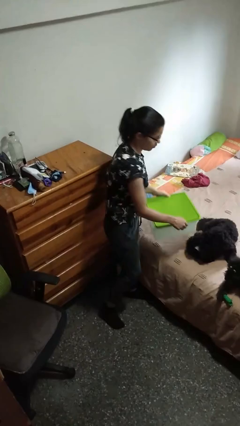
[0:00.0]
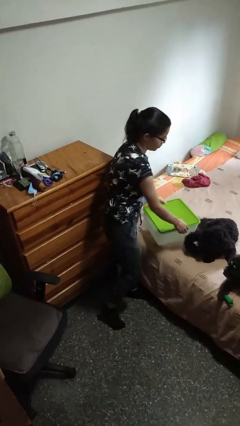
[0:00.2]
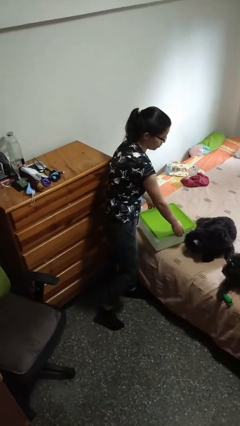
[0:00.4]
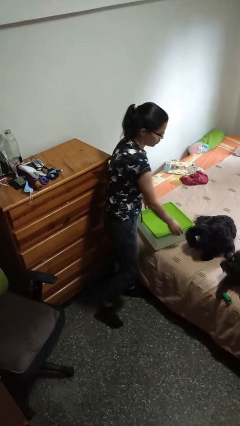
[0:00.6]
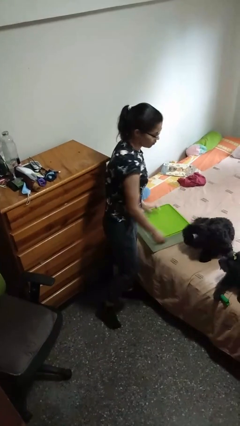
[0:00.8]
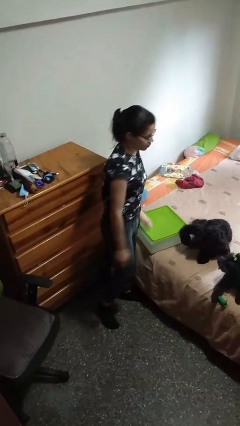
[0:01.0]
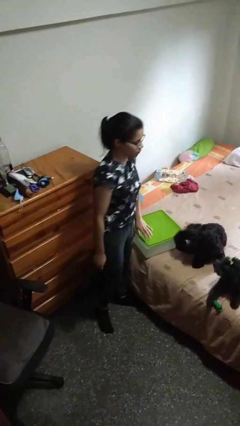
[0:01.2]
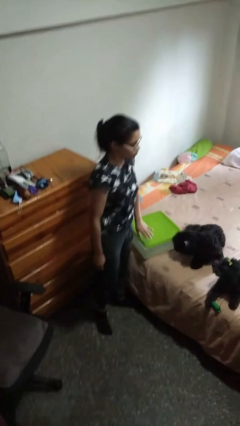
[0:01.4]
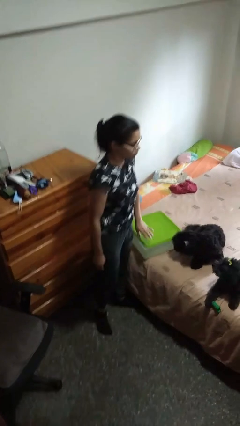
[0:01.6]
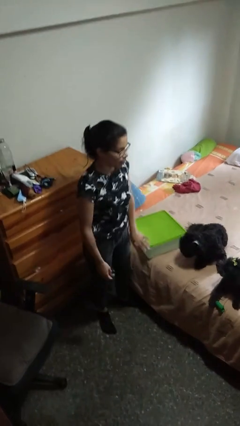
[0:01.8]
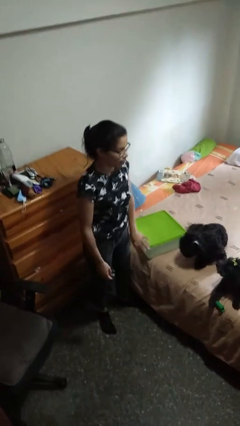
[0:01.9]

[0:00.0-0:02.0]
person puts down object on bed

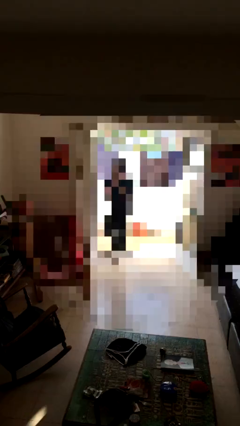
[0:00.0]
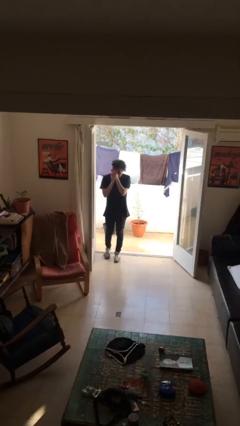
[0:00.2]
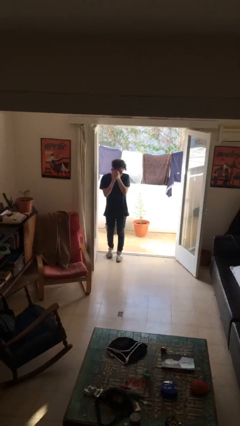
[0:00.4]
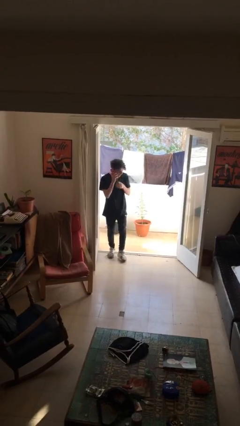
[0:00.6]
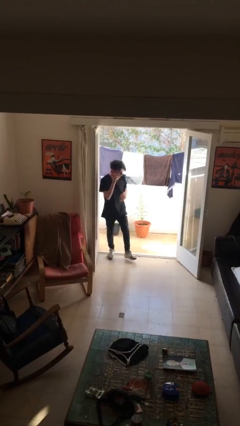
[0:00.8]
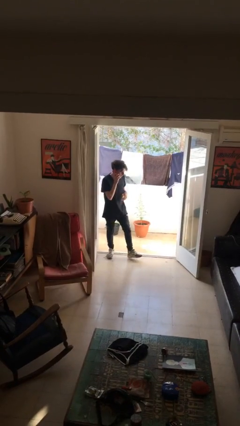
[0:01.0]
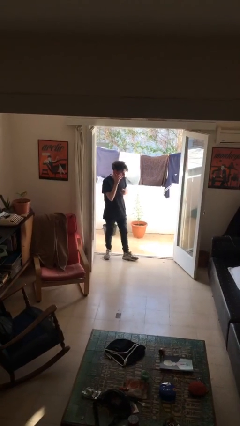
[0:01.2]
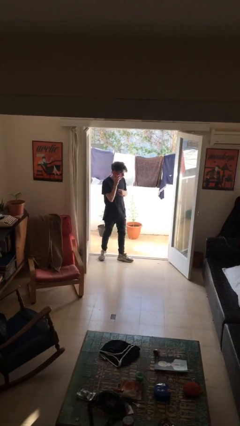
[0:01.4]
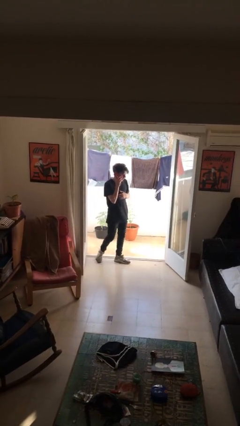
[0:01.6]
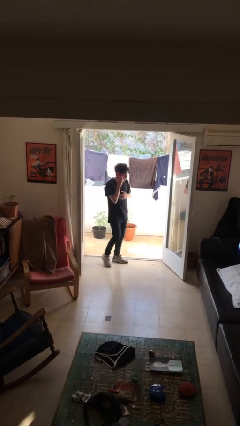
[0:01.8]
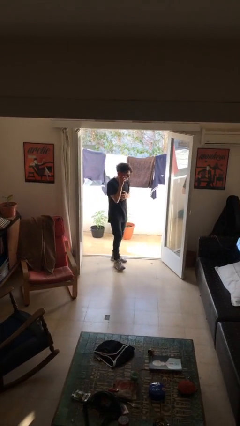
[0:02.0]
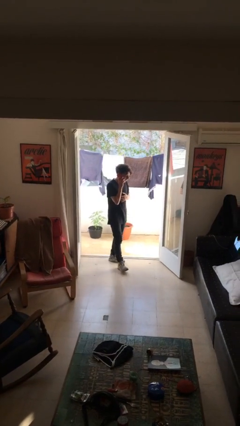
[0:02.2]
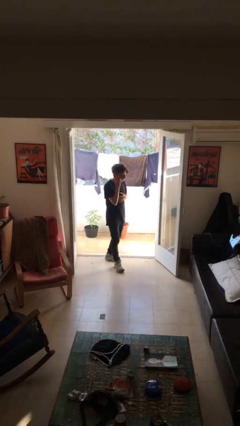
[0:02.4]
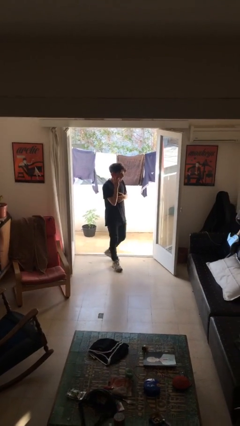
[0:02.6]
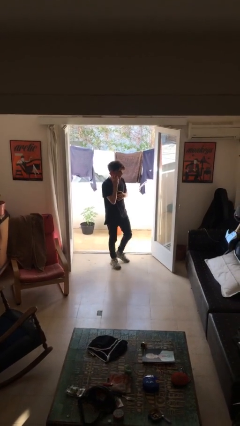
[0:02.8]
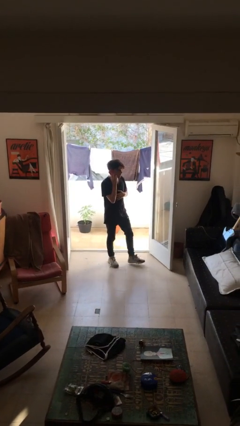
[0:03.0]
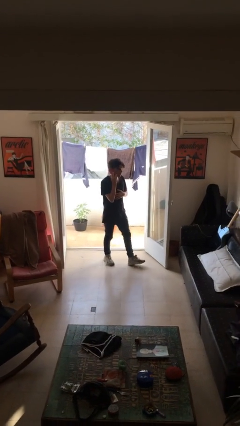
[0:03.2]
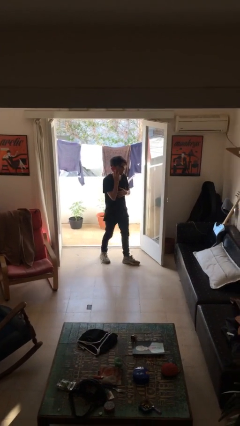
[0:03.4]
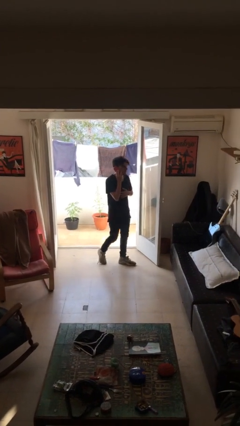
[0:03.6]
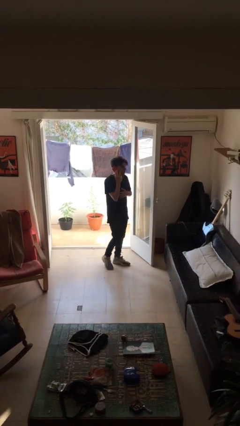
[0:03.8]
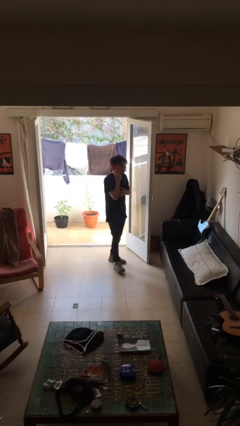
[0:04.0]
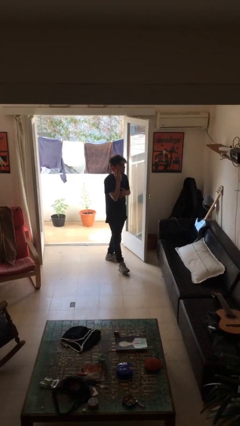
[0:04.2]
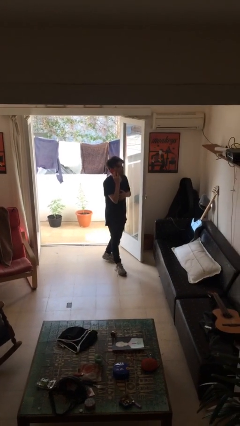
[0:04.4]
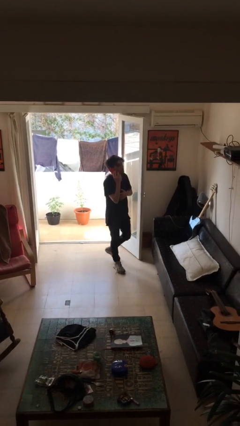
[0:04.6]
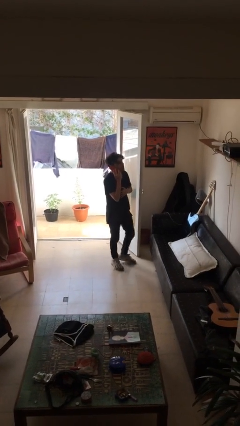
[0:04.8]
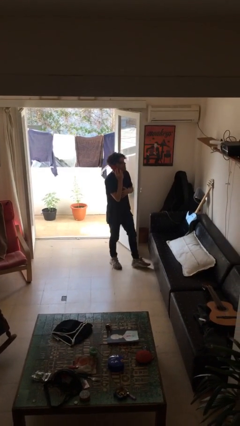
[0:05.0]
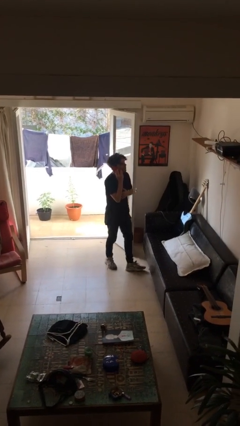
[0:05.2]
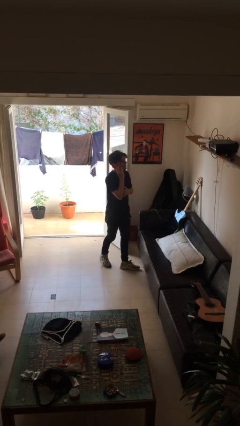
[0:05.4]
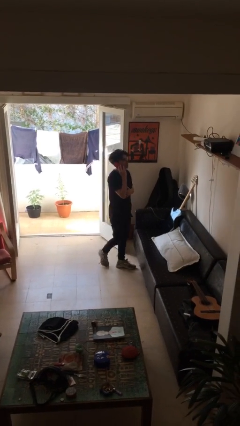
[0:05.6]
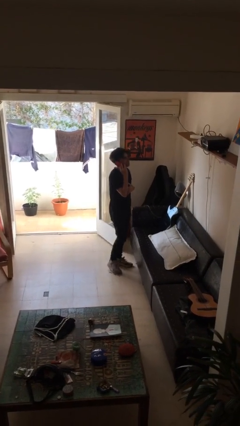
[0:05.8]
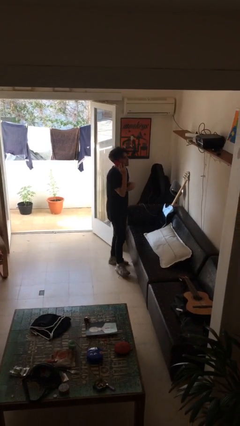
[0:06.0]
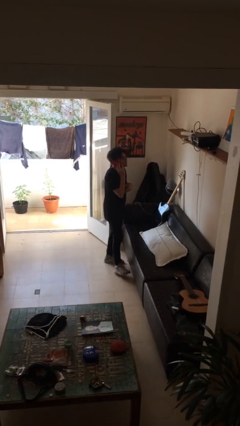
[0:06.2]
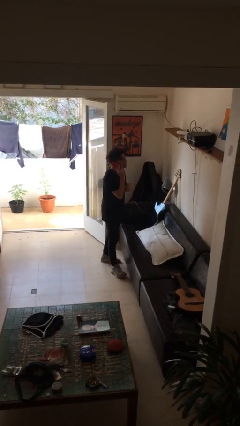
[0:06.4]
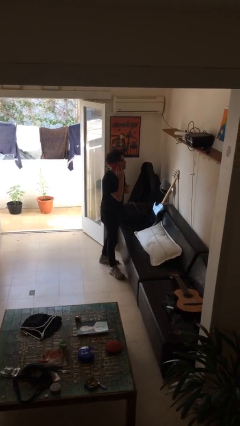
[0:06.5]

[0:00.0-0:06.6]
person talks on phone

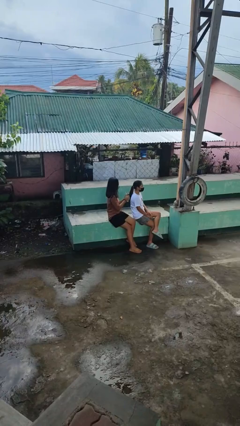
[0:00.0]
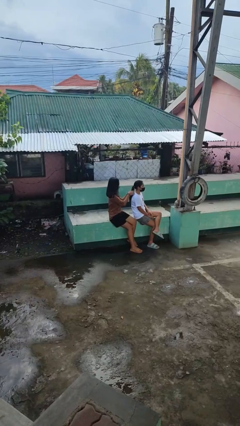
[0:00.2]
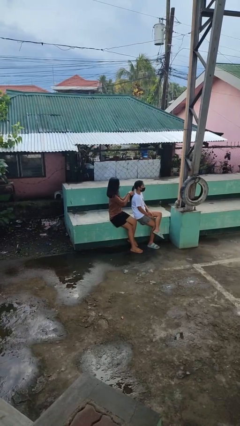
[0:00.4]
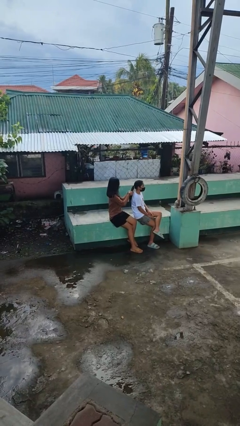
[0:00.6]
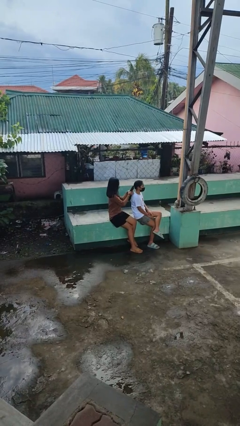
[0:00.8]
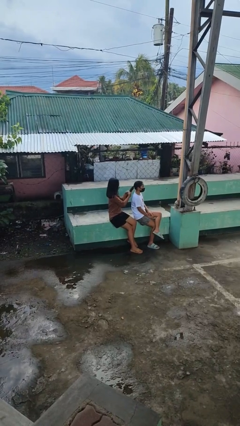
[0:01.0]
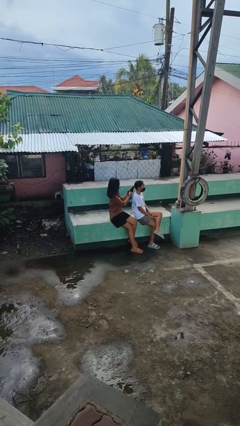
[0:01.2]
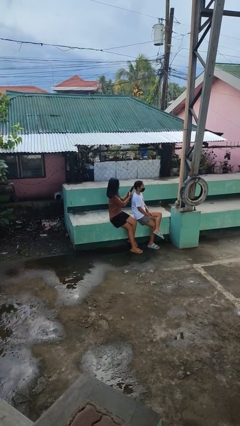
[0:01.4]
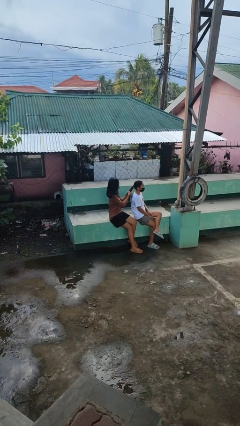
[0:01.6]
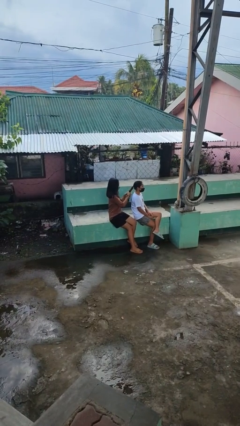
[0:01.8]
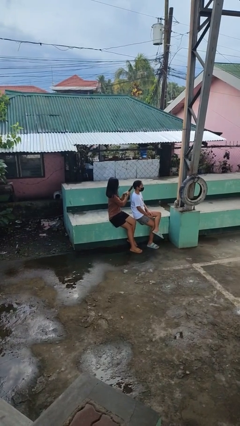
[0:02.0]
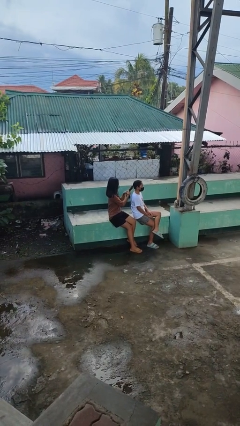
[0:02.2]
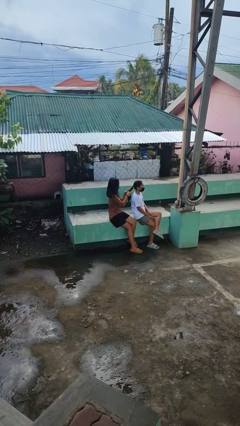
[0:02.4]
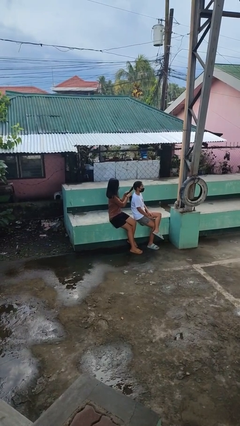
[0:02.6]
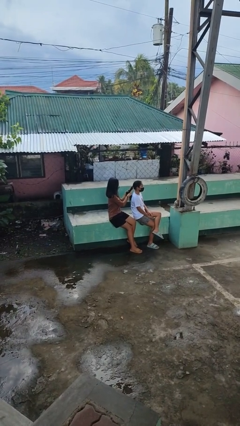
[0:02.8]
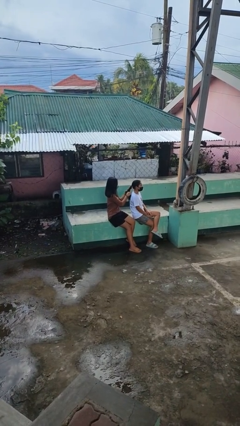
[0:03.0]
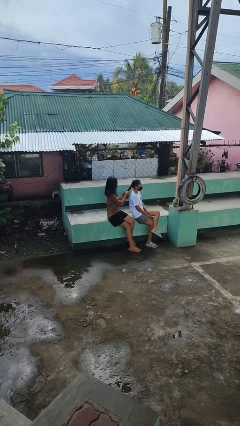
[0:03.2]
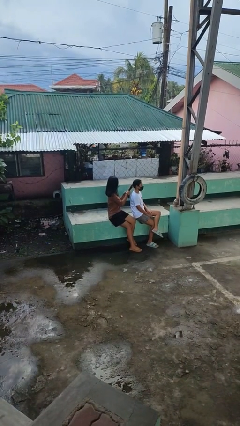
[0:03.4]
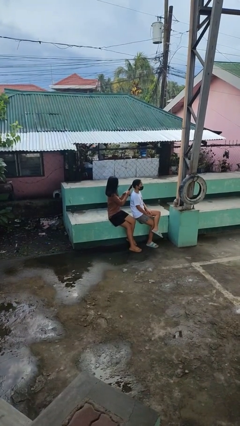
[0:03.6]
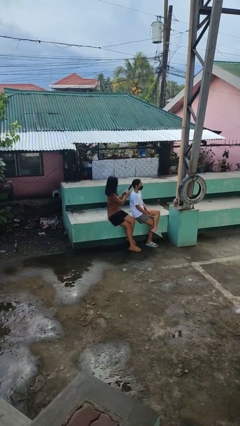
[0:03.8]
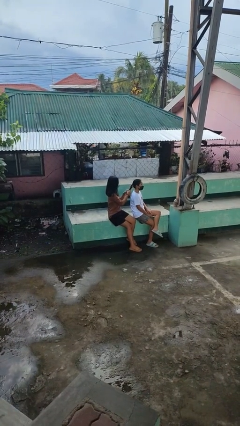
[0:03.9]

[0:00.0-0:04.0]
person braids hair of person

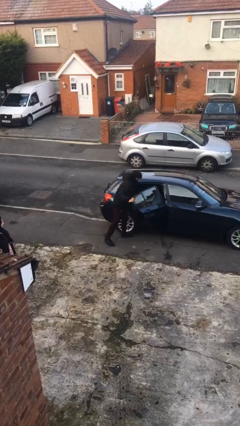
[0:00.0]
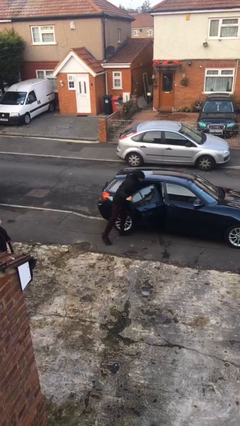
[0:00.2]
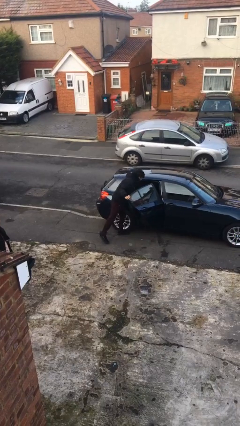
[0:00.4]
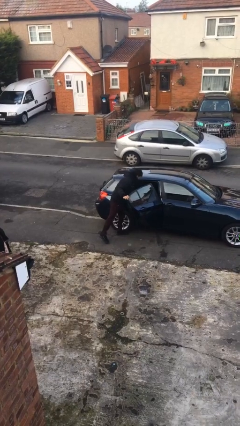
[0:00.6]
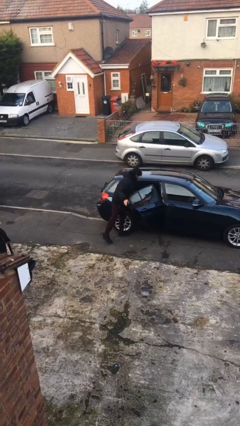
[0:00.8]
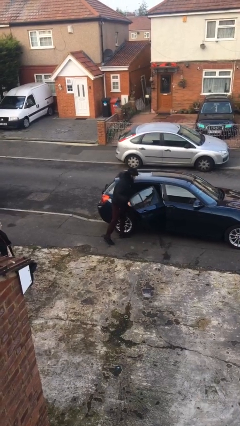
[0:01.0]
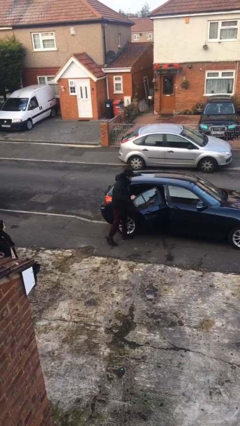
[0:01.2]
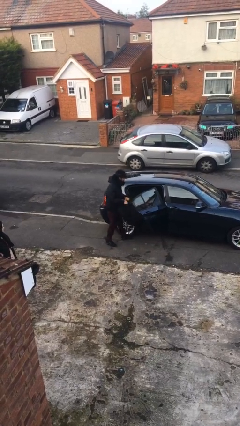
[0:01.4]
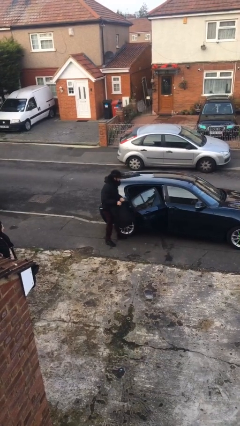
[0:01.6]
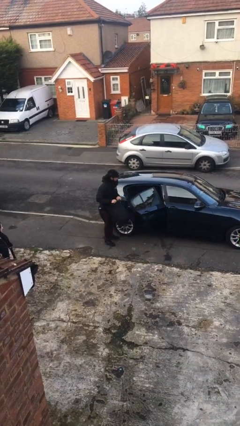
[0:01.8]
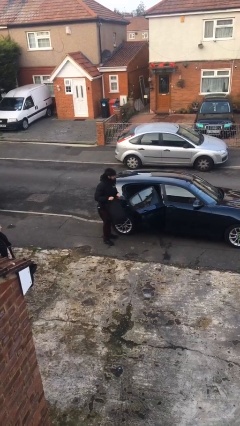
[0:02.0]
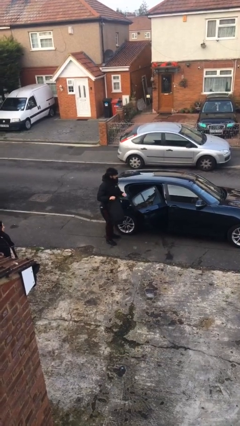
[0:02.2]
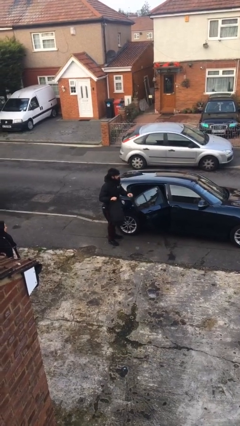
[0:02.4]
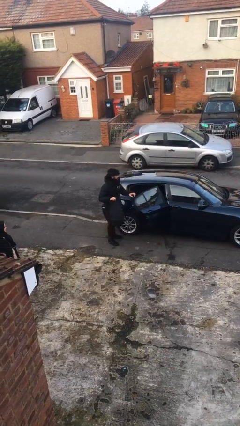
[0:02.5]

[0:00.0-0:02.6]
person unloads car

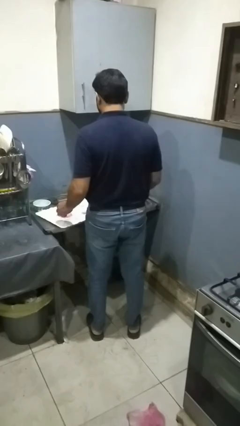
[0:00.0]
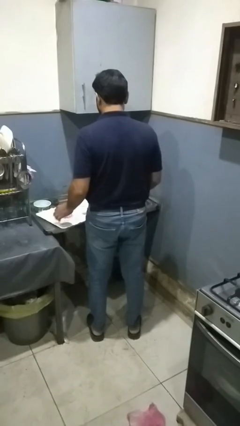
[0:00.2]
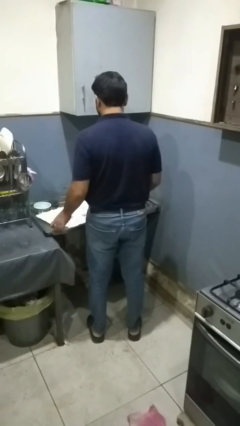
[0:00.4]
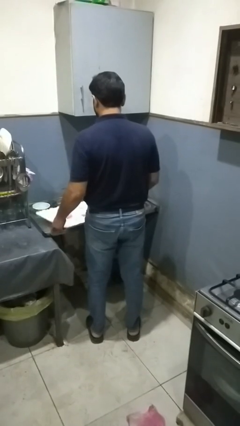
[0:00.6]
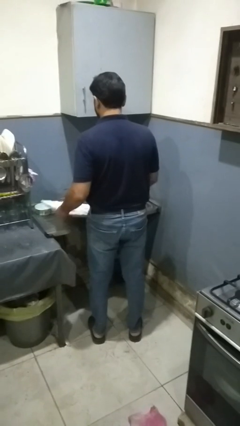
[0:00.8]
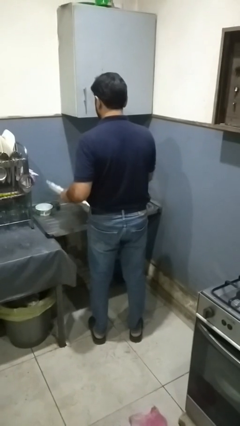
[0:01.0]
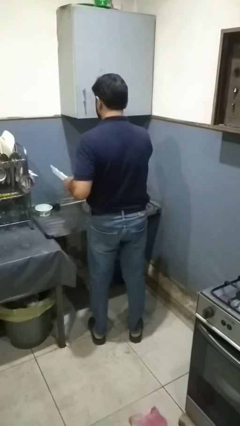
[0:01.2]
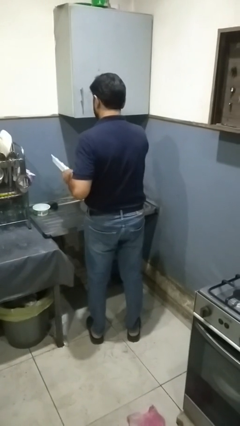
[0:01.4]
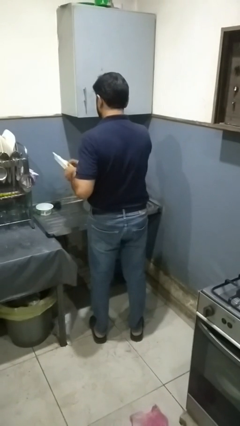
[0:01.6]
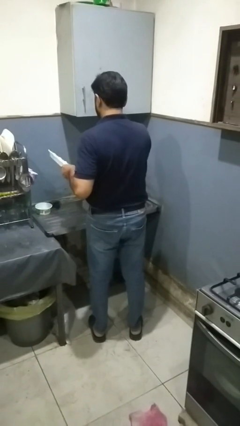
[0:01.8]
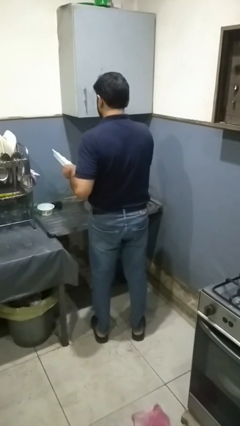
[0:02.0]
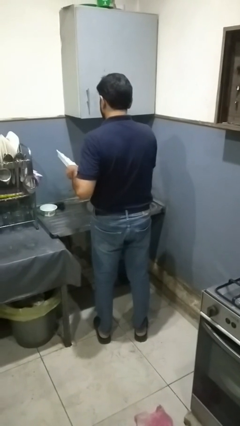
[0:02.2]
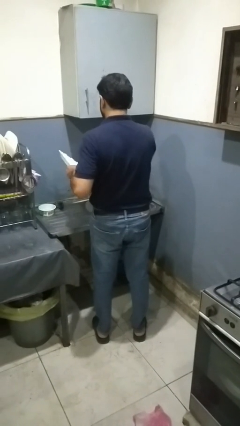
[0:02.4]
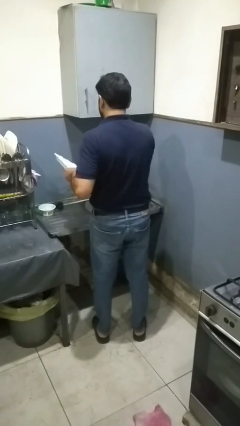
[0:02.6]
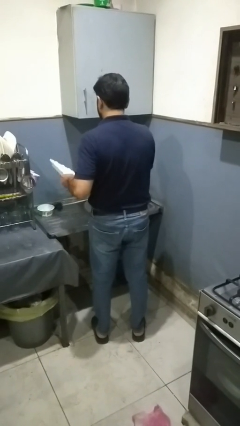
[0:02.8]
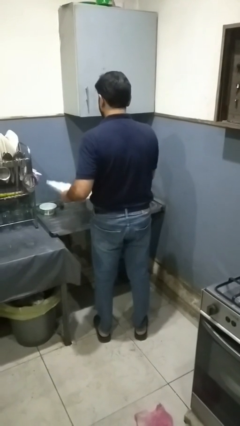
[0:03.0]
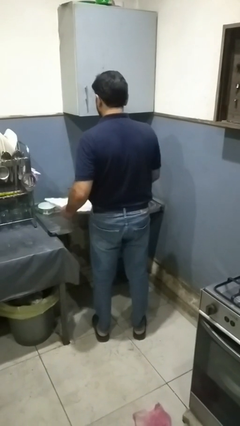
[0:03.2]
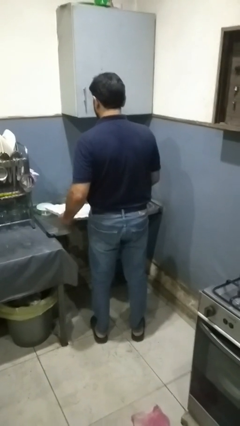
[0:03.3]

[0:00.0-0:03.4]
person washes dish
